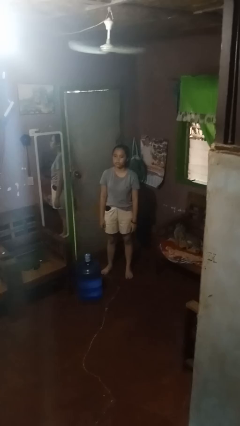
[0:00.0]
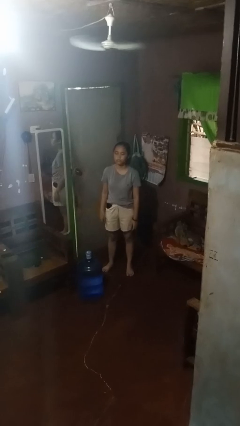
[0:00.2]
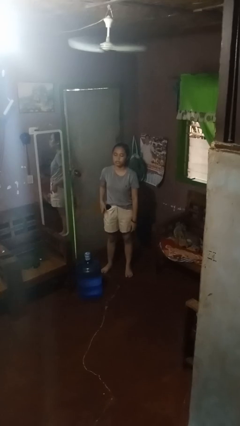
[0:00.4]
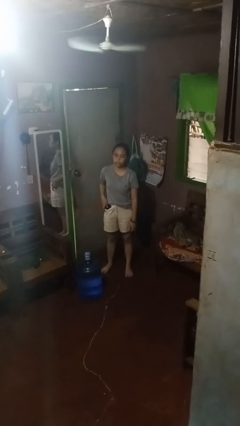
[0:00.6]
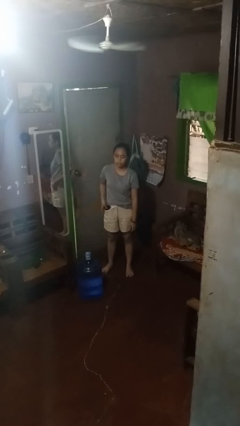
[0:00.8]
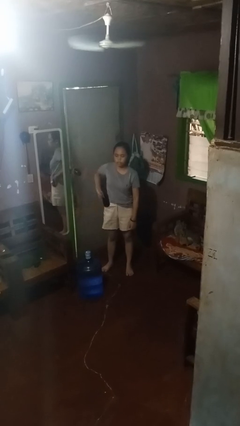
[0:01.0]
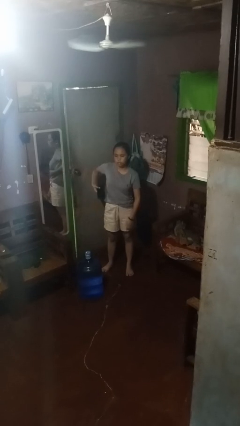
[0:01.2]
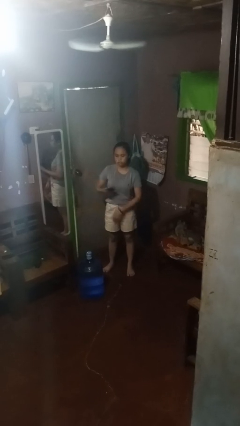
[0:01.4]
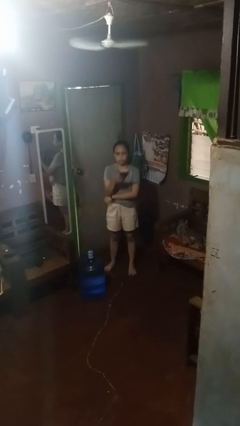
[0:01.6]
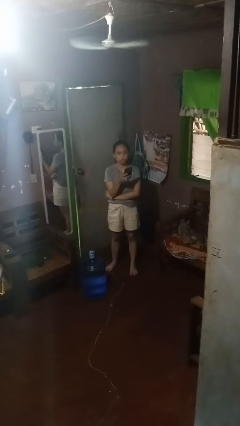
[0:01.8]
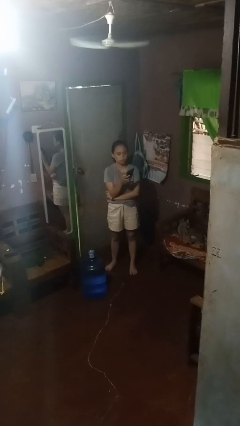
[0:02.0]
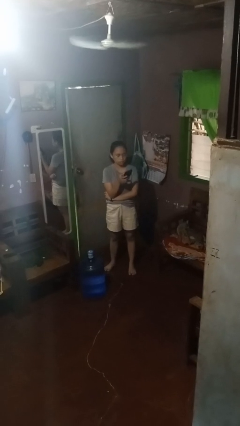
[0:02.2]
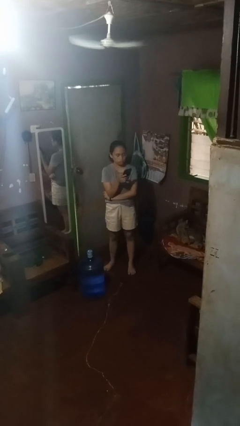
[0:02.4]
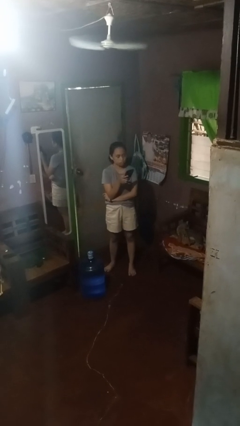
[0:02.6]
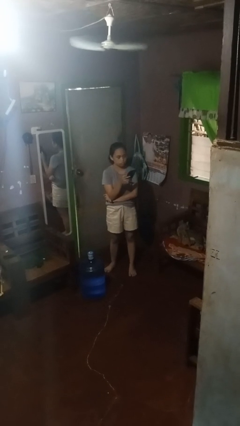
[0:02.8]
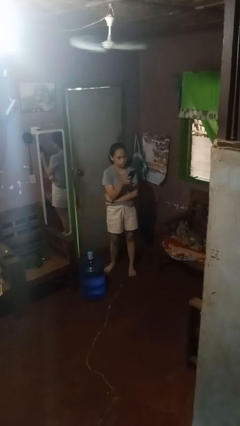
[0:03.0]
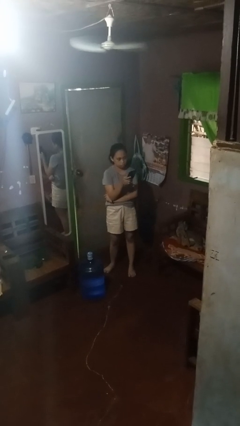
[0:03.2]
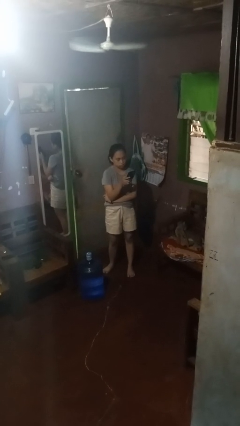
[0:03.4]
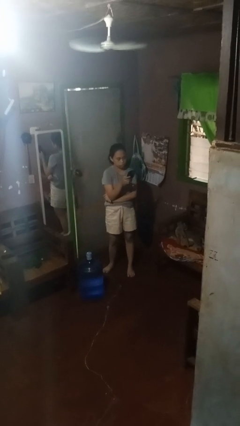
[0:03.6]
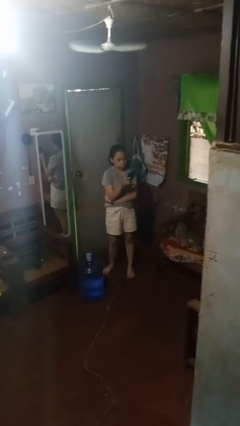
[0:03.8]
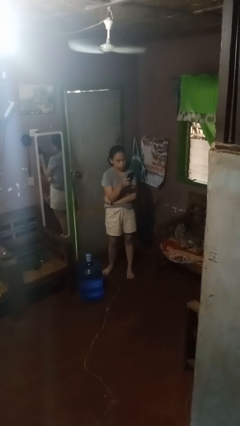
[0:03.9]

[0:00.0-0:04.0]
person takes phone from pocket

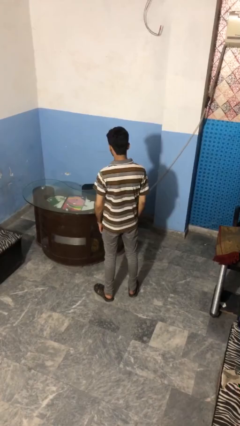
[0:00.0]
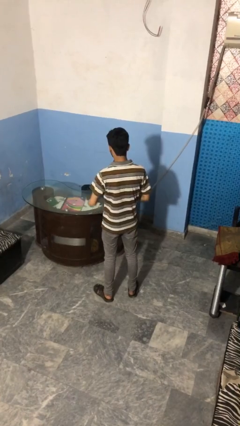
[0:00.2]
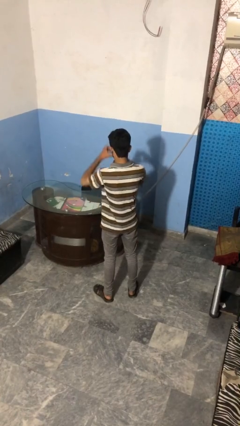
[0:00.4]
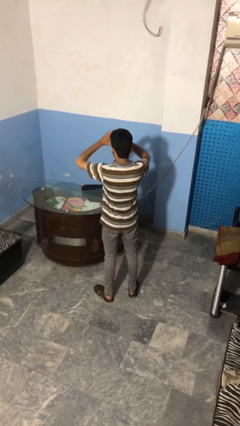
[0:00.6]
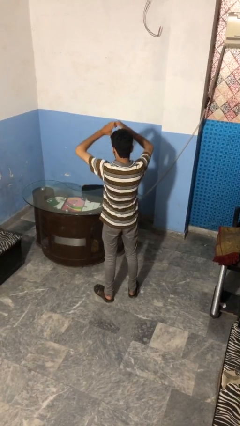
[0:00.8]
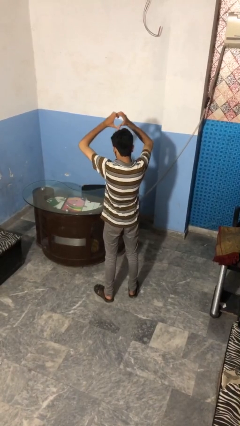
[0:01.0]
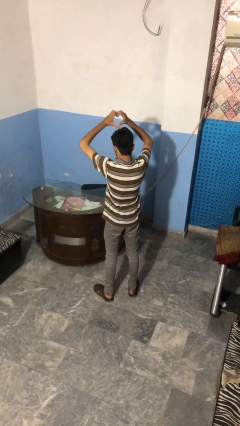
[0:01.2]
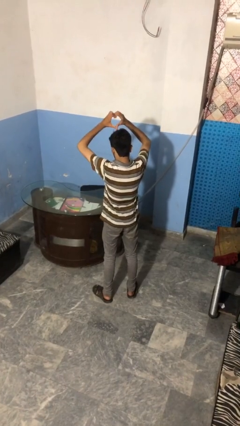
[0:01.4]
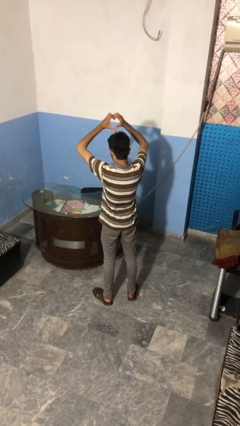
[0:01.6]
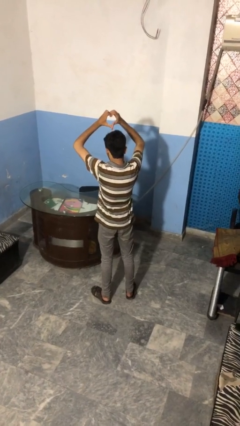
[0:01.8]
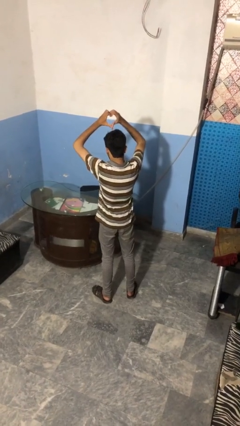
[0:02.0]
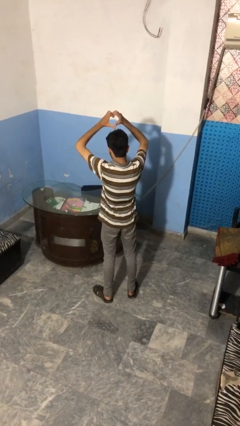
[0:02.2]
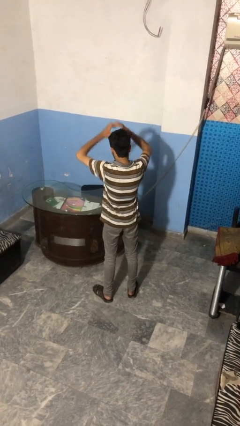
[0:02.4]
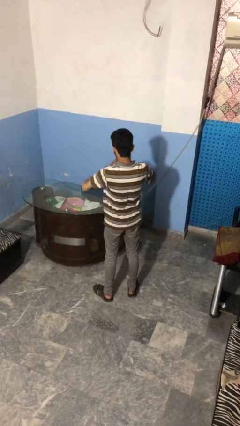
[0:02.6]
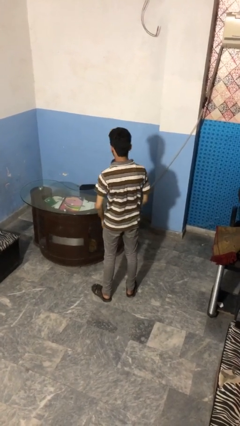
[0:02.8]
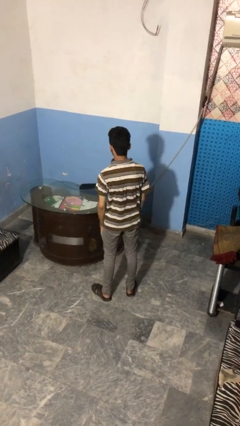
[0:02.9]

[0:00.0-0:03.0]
person gestures heart

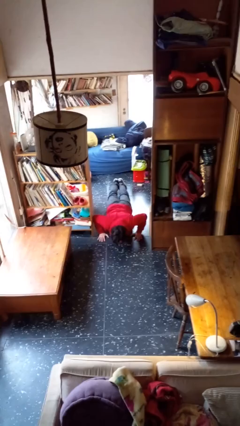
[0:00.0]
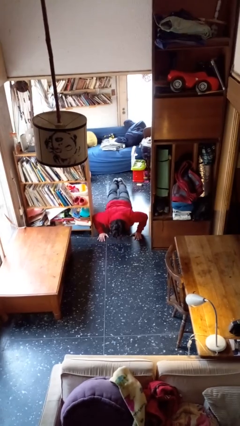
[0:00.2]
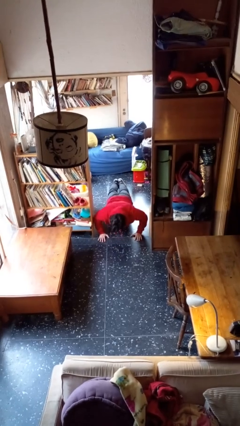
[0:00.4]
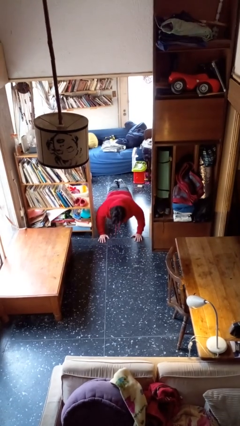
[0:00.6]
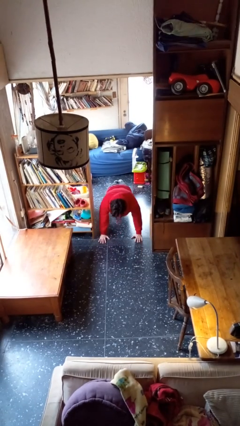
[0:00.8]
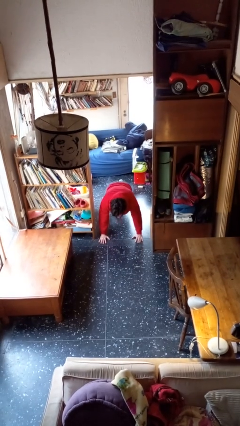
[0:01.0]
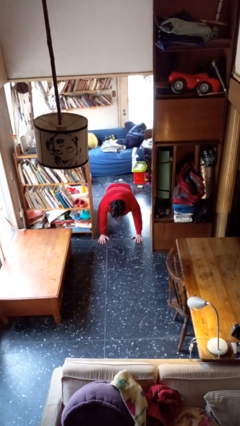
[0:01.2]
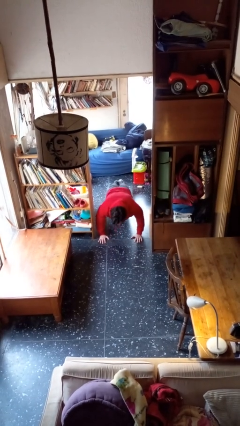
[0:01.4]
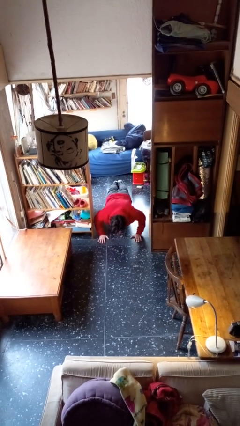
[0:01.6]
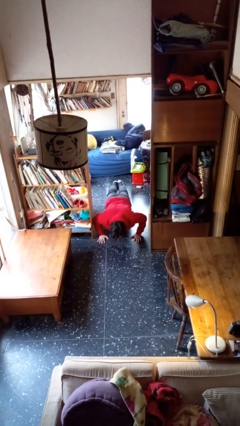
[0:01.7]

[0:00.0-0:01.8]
person exercises with pushup

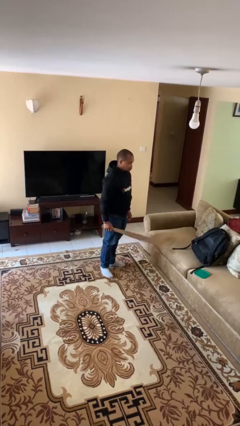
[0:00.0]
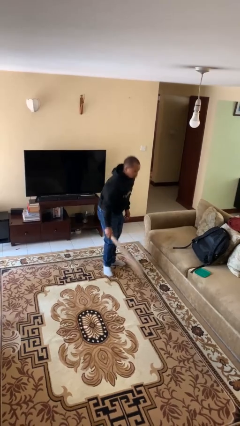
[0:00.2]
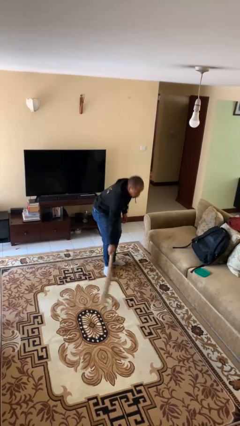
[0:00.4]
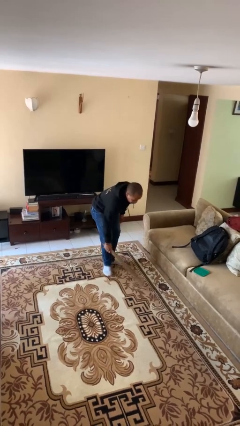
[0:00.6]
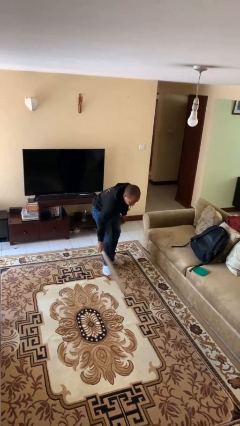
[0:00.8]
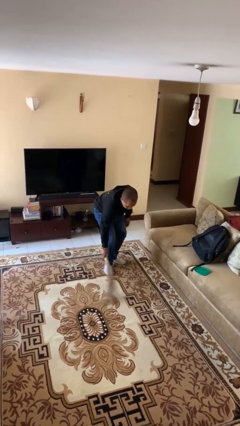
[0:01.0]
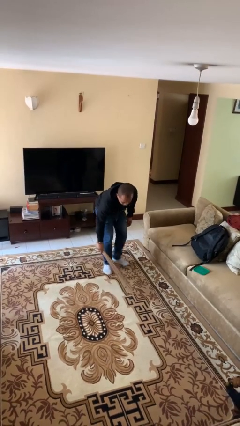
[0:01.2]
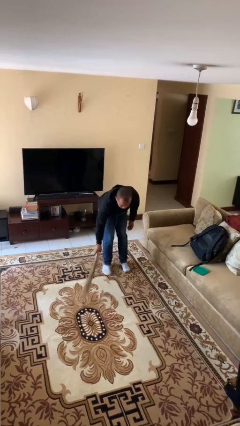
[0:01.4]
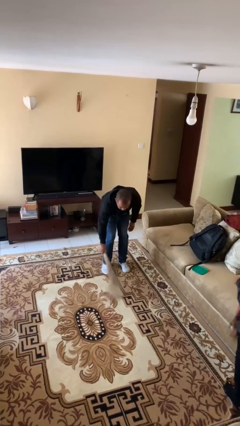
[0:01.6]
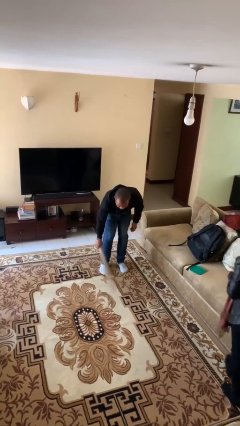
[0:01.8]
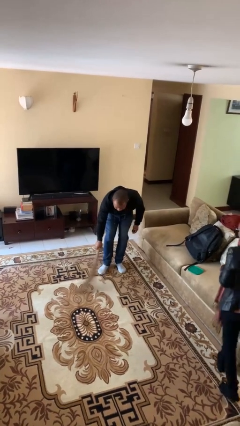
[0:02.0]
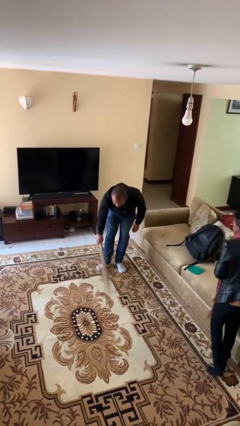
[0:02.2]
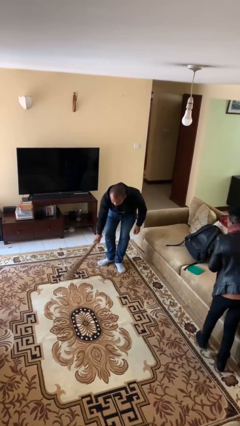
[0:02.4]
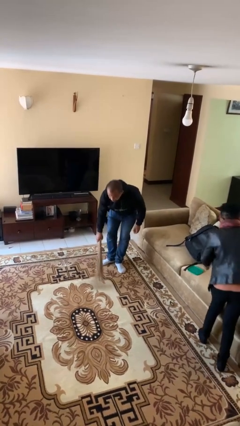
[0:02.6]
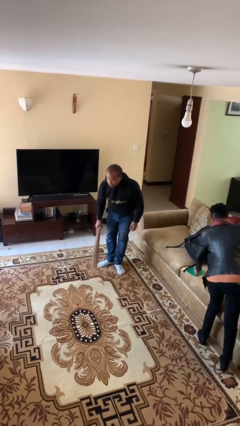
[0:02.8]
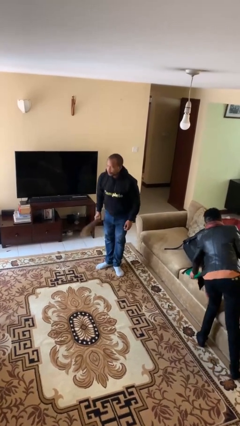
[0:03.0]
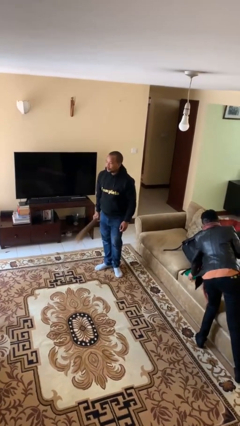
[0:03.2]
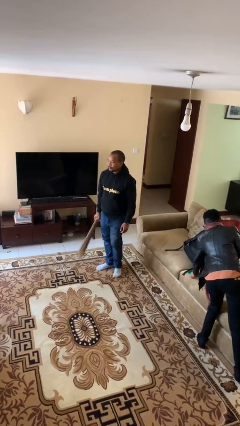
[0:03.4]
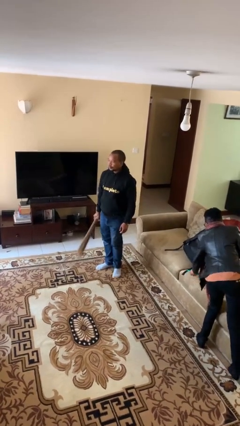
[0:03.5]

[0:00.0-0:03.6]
person sweeps floor

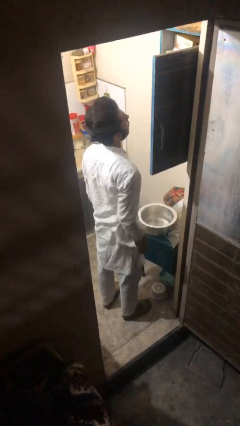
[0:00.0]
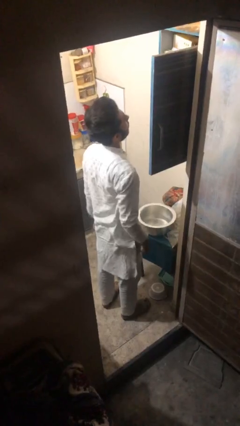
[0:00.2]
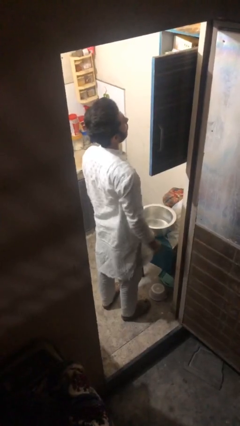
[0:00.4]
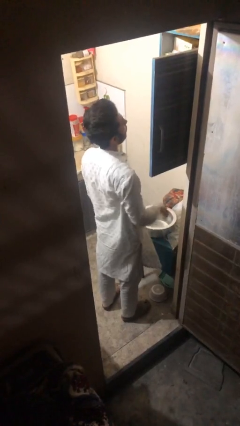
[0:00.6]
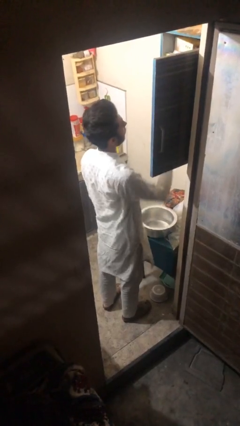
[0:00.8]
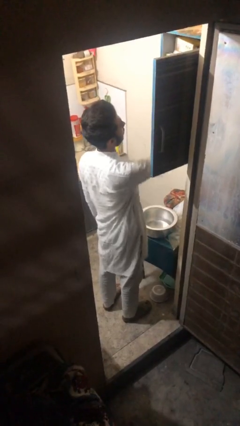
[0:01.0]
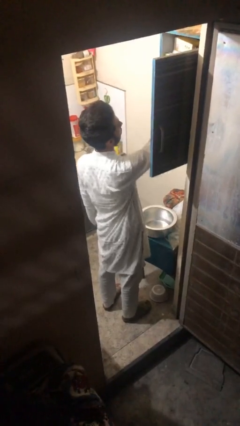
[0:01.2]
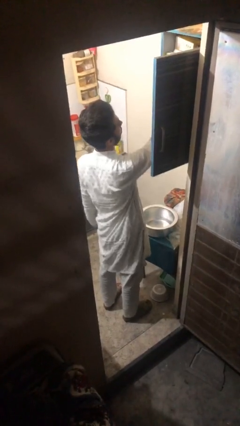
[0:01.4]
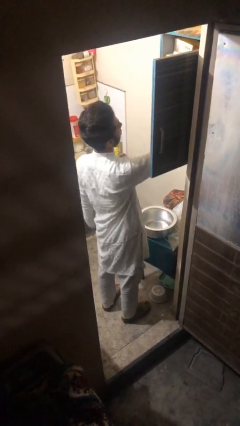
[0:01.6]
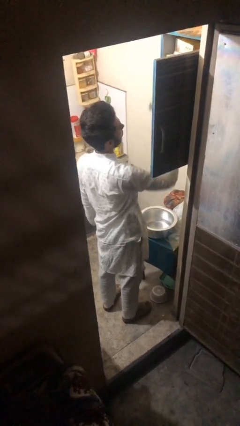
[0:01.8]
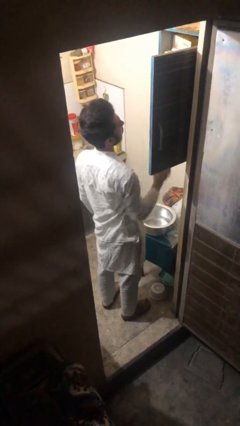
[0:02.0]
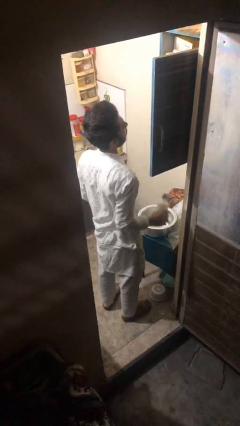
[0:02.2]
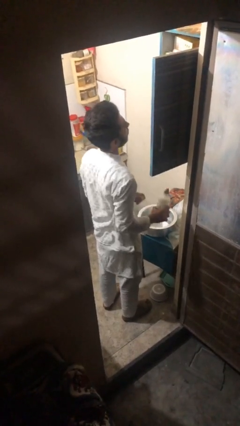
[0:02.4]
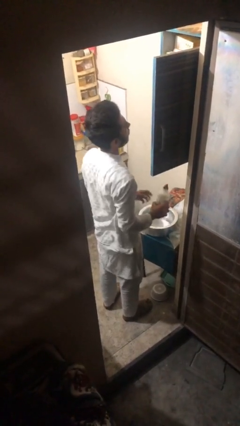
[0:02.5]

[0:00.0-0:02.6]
person takes object from cabinet

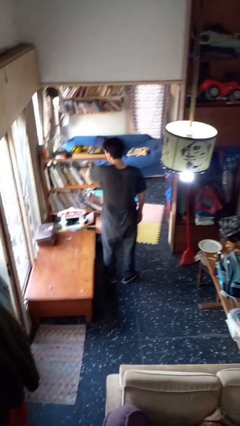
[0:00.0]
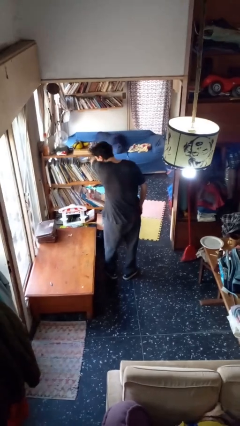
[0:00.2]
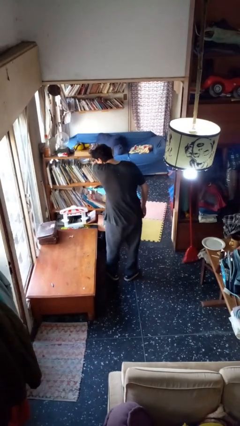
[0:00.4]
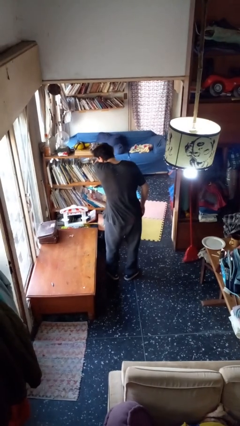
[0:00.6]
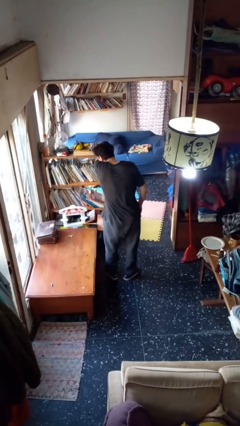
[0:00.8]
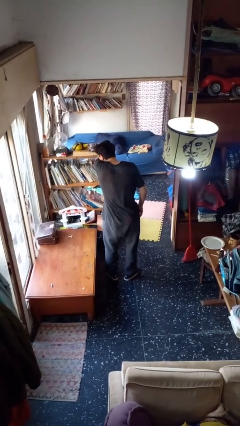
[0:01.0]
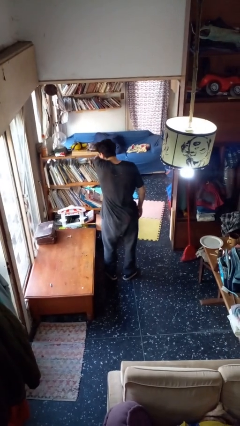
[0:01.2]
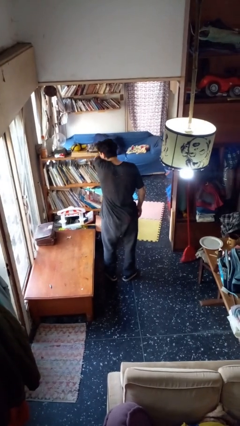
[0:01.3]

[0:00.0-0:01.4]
person sneezes into arm

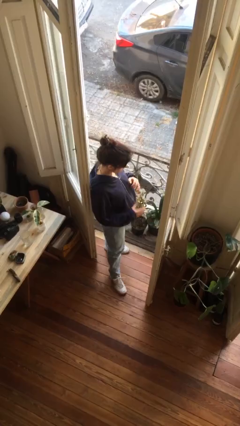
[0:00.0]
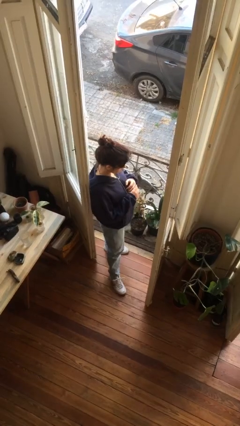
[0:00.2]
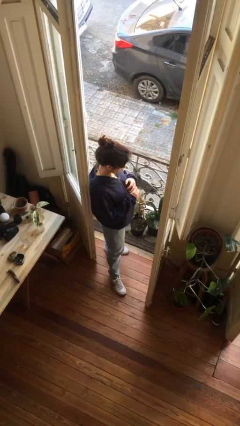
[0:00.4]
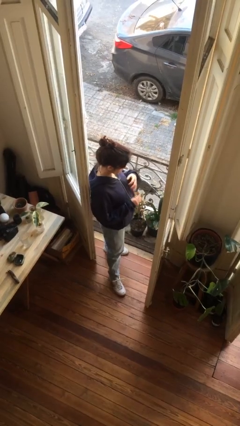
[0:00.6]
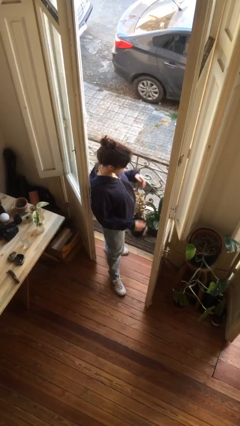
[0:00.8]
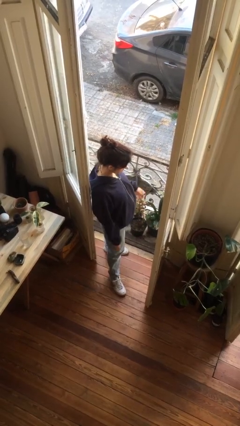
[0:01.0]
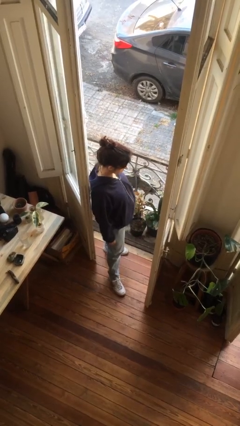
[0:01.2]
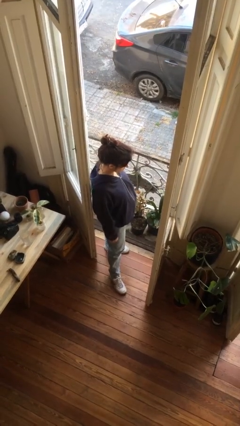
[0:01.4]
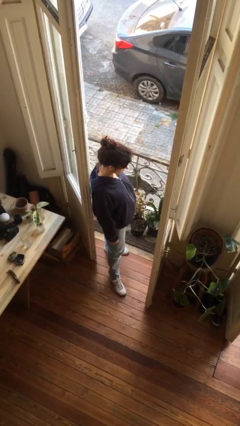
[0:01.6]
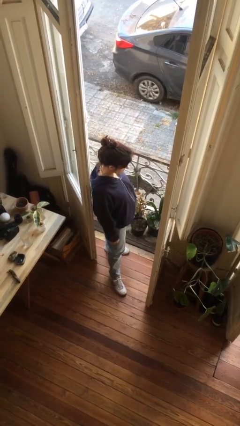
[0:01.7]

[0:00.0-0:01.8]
person takes off ring
